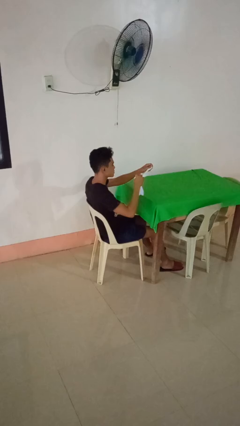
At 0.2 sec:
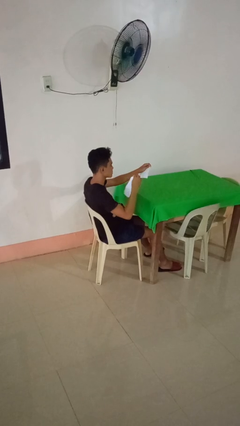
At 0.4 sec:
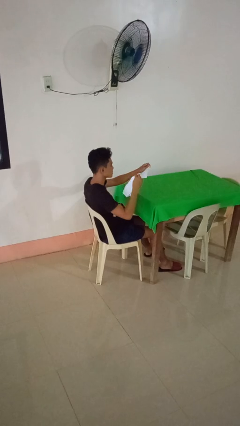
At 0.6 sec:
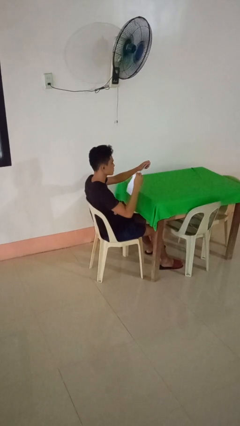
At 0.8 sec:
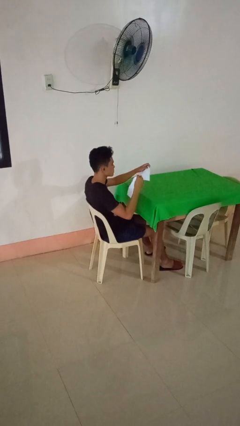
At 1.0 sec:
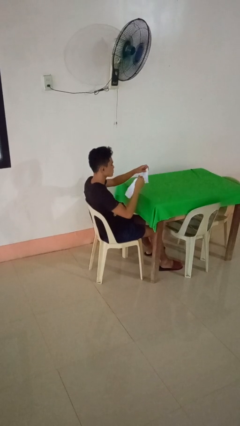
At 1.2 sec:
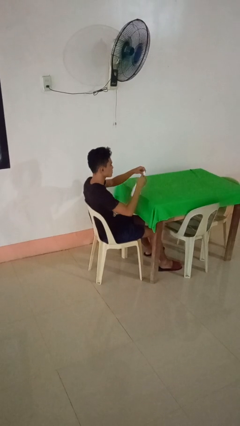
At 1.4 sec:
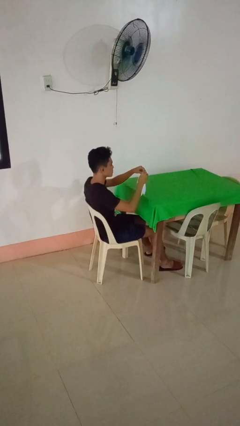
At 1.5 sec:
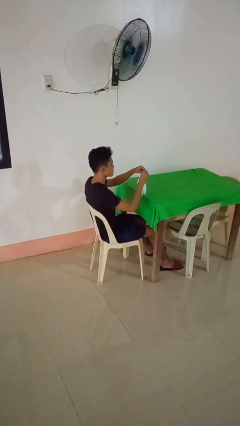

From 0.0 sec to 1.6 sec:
person tears paper

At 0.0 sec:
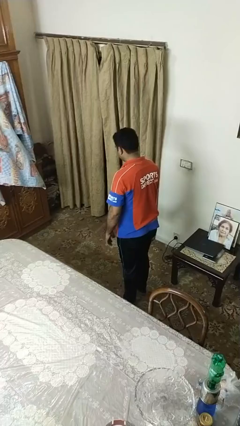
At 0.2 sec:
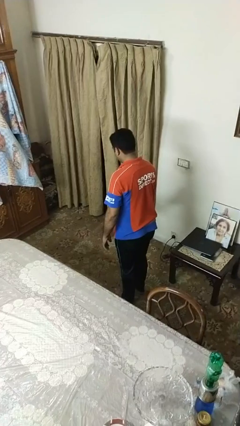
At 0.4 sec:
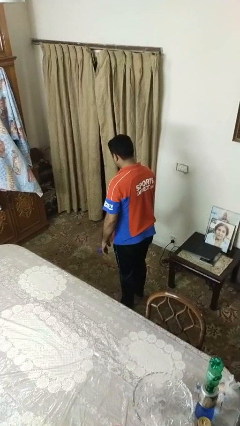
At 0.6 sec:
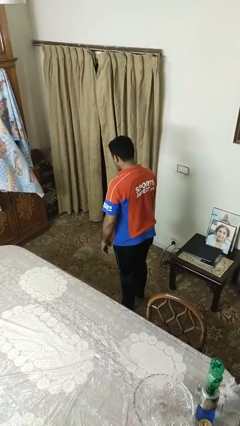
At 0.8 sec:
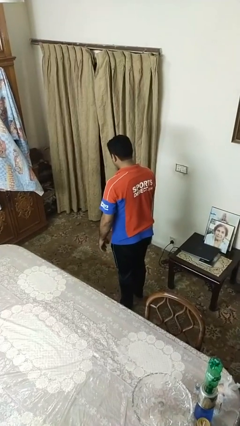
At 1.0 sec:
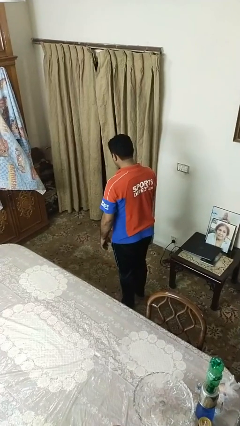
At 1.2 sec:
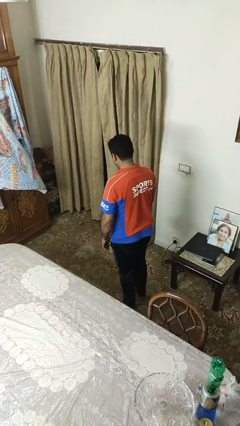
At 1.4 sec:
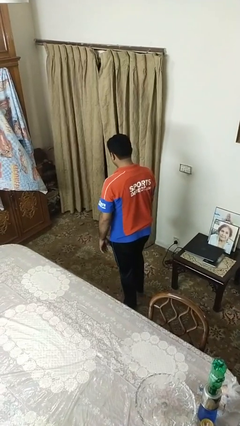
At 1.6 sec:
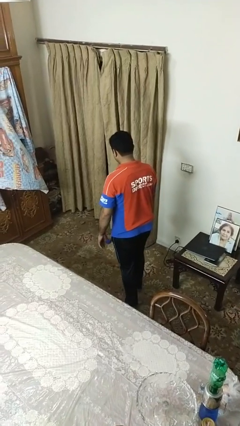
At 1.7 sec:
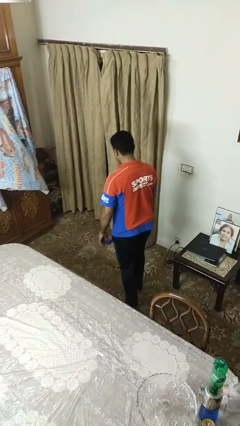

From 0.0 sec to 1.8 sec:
person throws object to ground

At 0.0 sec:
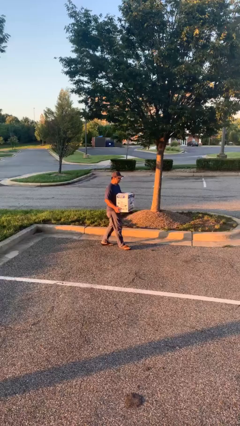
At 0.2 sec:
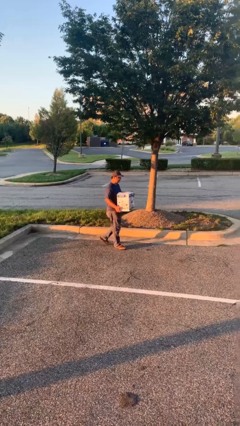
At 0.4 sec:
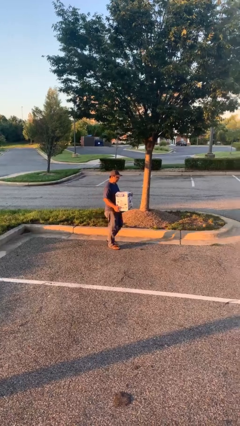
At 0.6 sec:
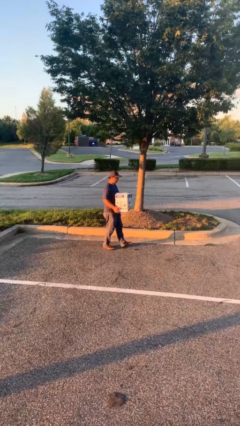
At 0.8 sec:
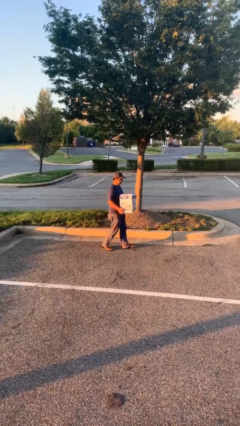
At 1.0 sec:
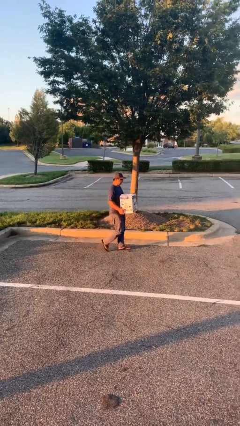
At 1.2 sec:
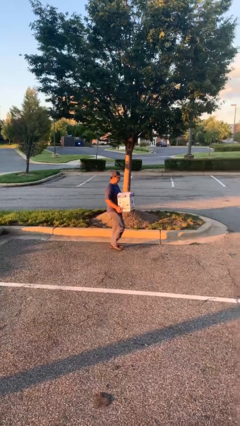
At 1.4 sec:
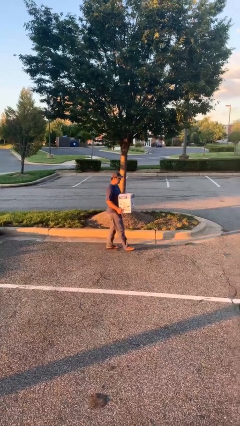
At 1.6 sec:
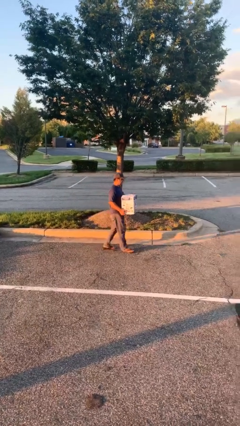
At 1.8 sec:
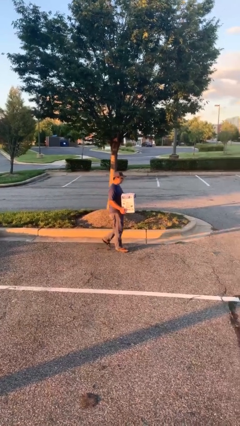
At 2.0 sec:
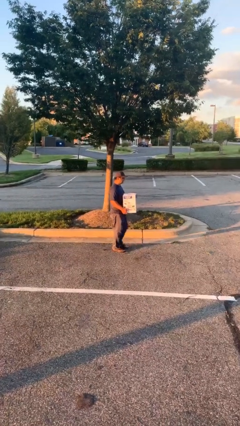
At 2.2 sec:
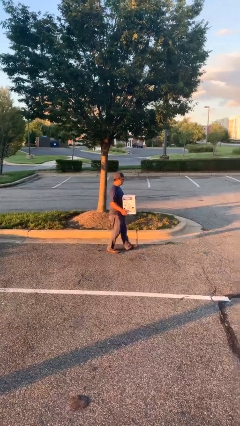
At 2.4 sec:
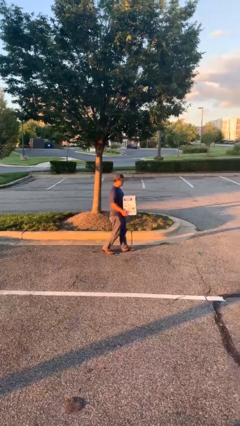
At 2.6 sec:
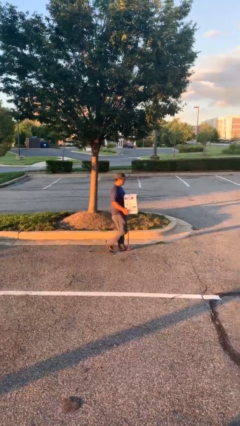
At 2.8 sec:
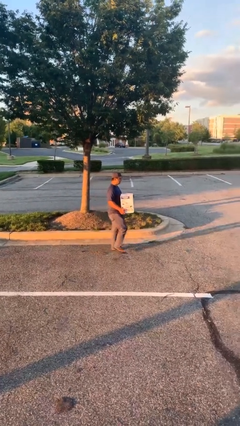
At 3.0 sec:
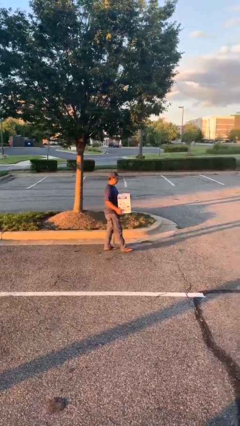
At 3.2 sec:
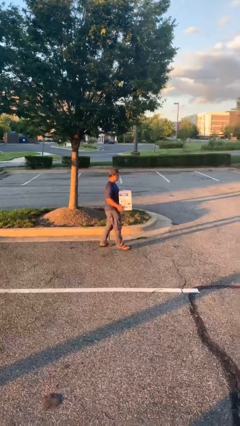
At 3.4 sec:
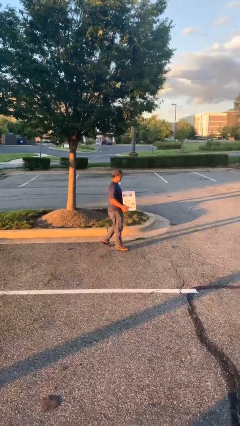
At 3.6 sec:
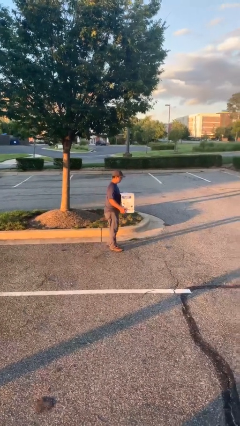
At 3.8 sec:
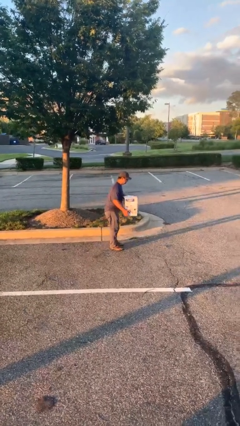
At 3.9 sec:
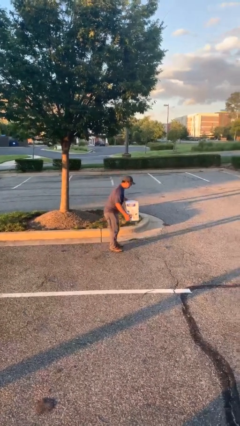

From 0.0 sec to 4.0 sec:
person carries heavy object

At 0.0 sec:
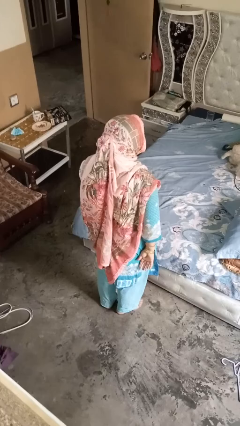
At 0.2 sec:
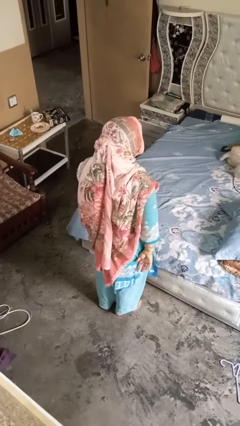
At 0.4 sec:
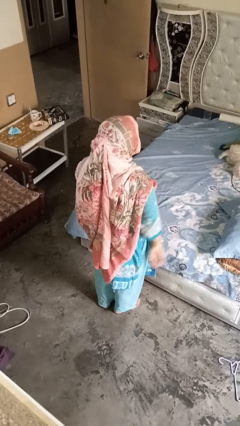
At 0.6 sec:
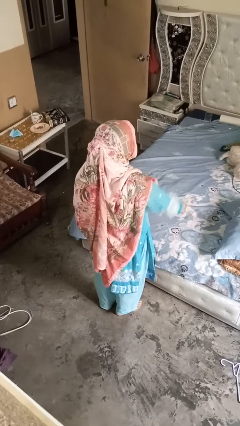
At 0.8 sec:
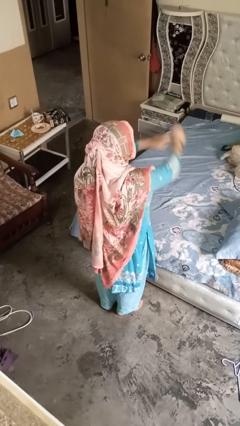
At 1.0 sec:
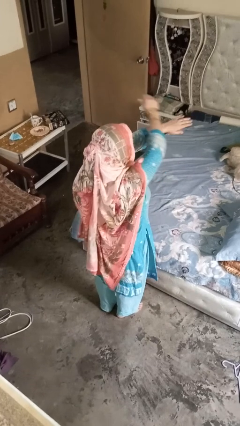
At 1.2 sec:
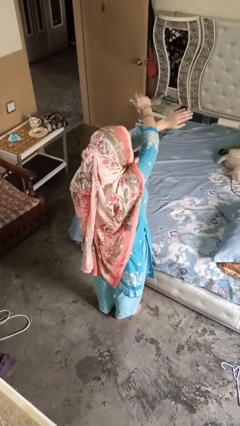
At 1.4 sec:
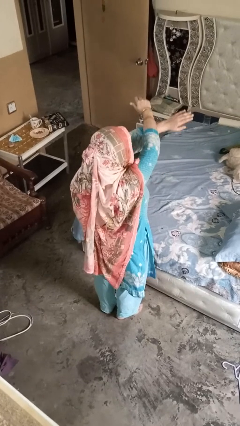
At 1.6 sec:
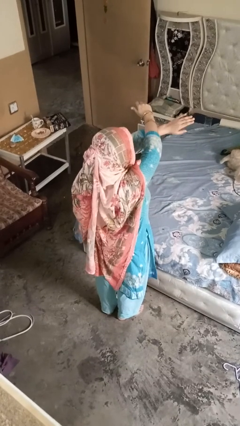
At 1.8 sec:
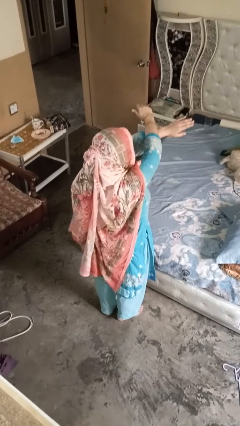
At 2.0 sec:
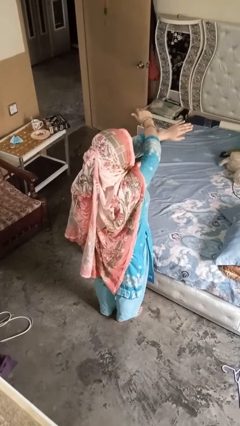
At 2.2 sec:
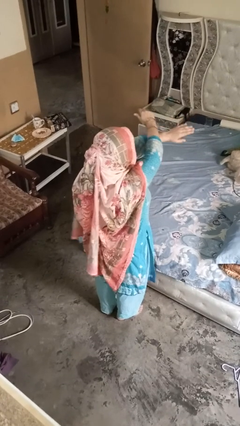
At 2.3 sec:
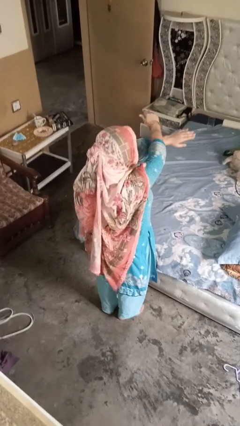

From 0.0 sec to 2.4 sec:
person gestures arms x

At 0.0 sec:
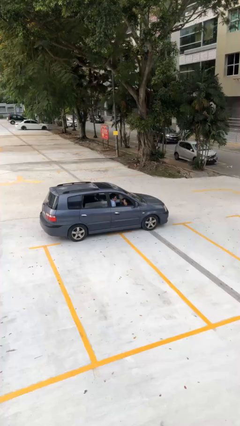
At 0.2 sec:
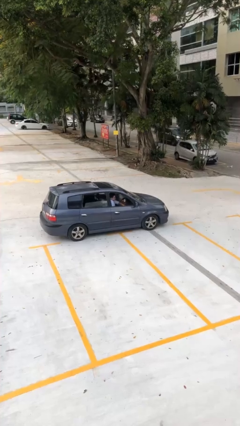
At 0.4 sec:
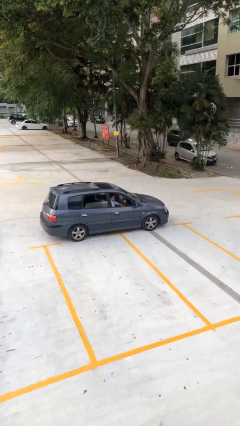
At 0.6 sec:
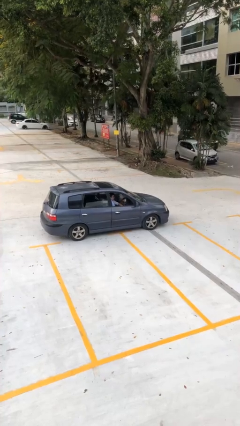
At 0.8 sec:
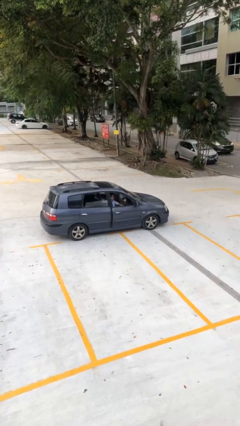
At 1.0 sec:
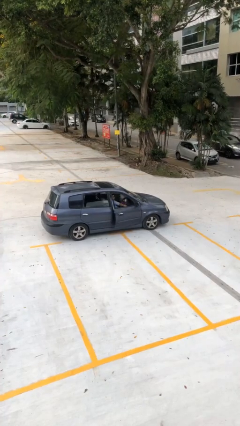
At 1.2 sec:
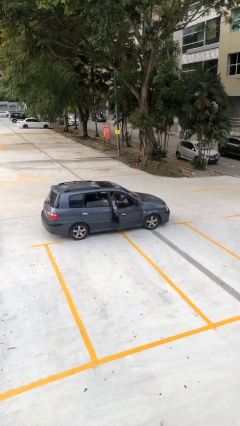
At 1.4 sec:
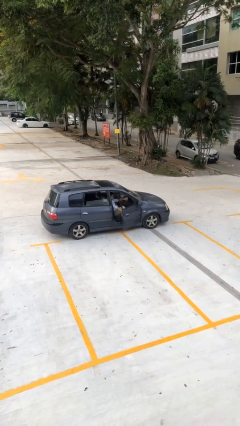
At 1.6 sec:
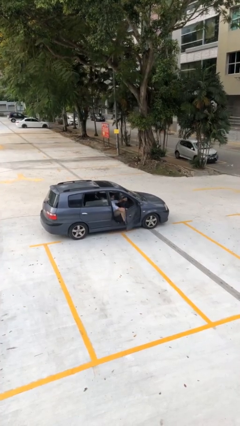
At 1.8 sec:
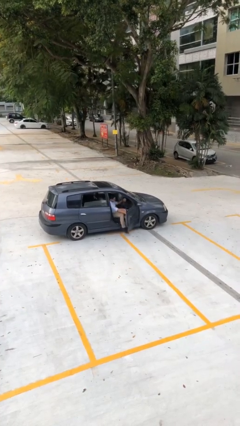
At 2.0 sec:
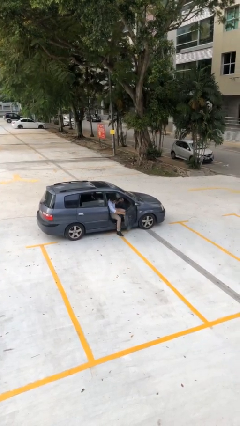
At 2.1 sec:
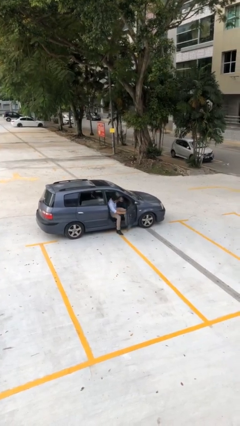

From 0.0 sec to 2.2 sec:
person opens car door

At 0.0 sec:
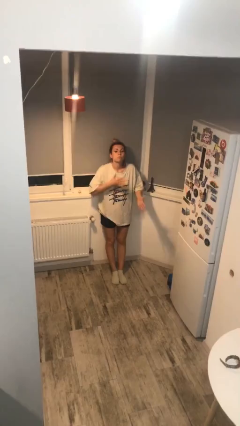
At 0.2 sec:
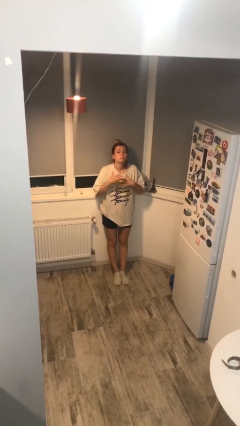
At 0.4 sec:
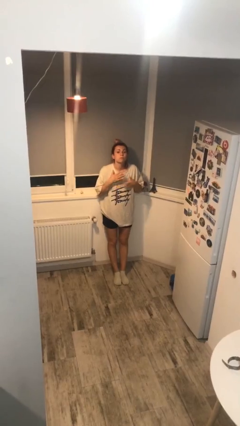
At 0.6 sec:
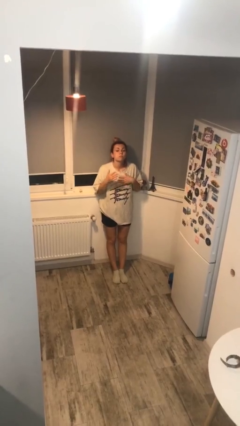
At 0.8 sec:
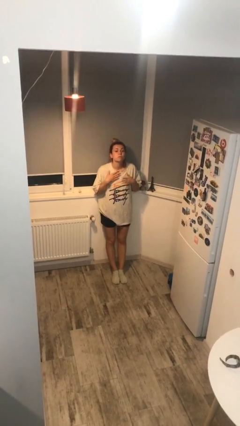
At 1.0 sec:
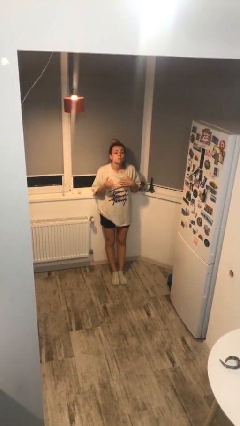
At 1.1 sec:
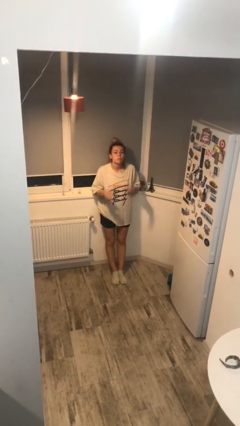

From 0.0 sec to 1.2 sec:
person drums on chest

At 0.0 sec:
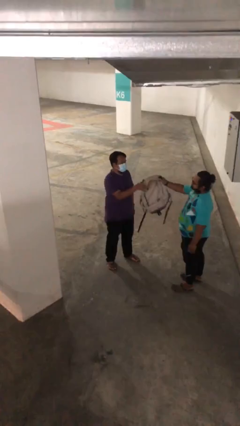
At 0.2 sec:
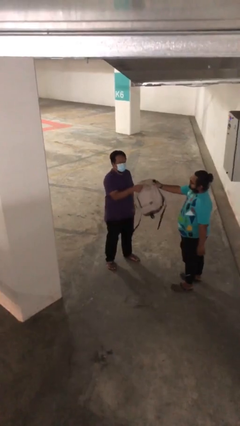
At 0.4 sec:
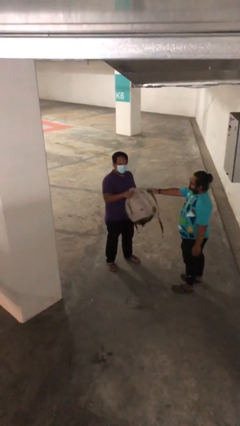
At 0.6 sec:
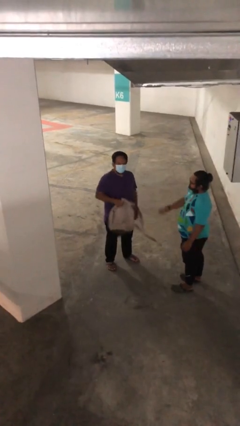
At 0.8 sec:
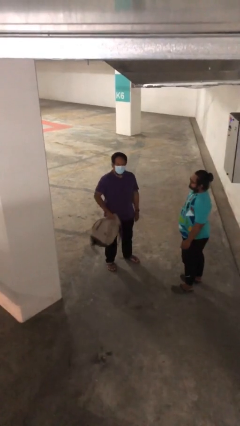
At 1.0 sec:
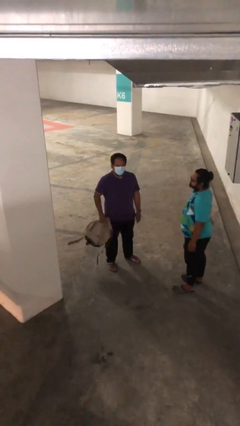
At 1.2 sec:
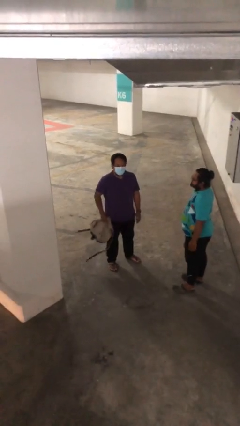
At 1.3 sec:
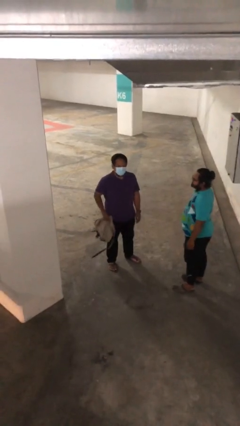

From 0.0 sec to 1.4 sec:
person transfers object to person

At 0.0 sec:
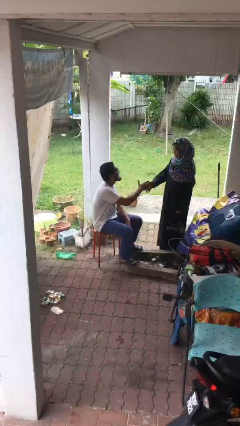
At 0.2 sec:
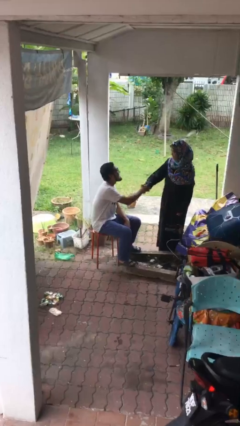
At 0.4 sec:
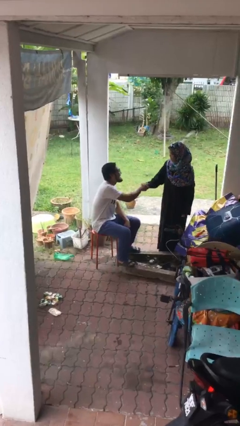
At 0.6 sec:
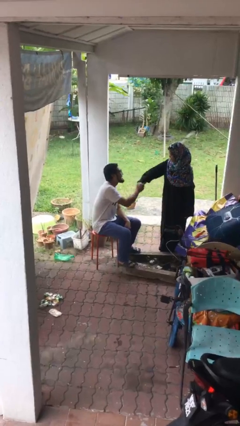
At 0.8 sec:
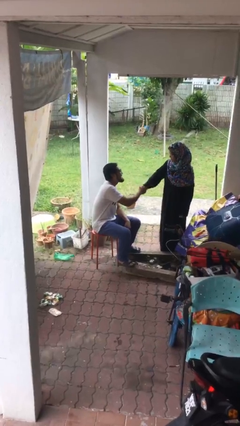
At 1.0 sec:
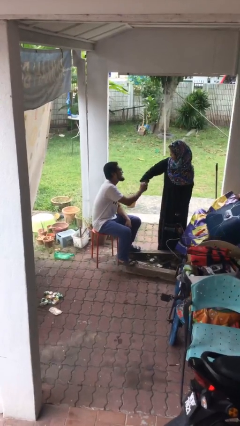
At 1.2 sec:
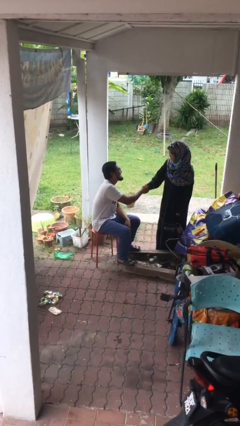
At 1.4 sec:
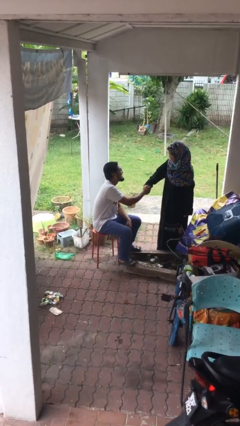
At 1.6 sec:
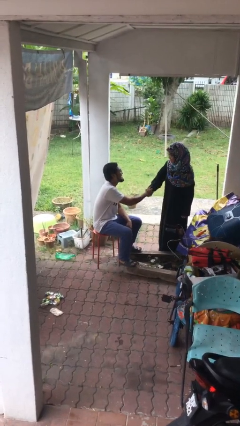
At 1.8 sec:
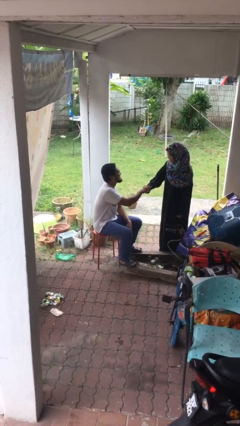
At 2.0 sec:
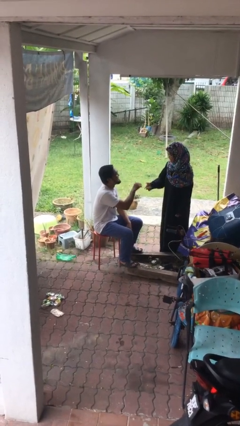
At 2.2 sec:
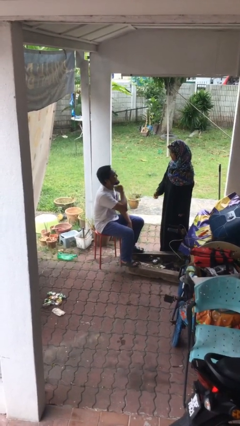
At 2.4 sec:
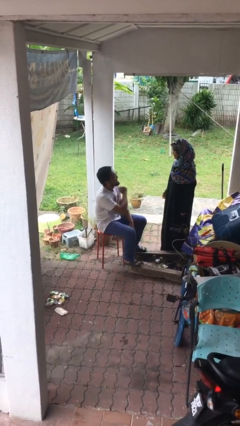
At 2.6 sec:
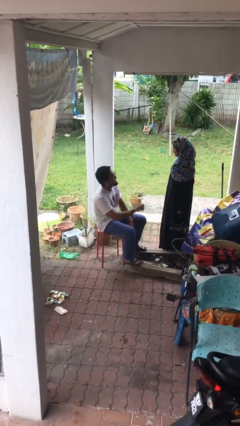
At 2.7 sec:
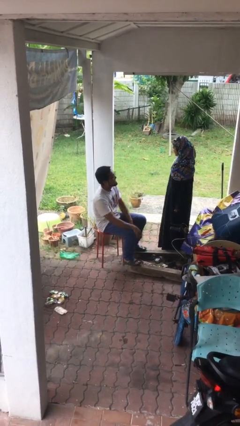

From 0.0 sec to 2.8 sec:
person shakes hand
